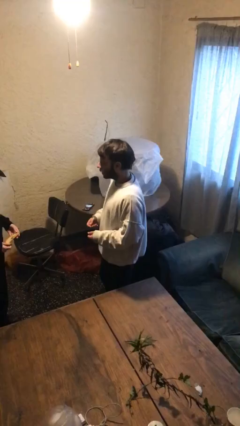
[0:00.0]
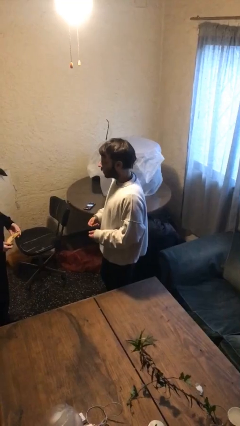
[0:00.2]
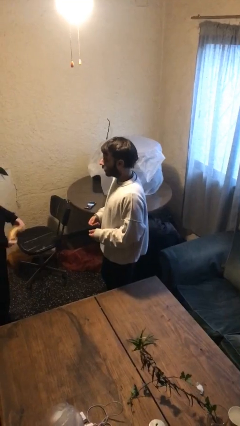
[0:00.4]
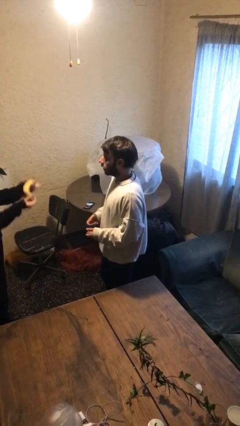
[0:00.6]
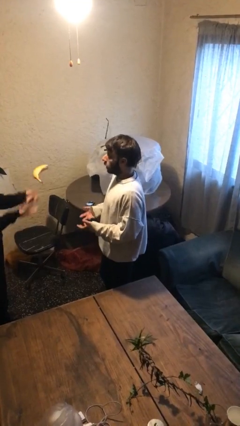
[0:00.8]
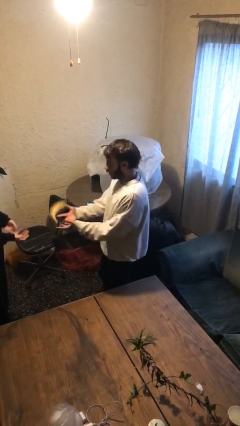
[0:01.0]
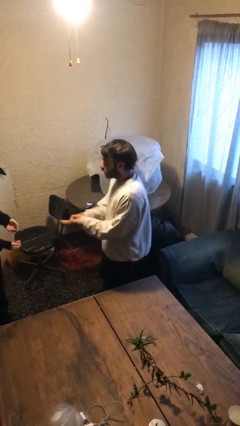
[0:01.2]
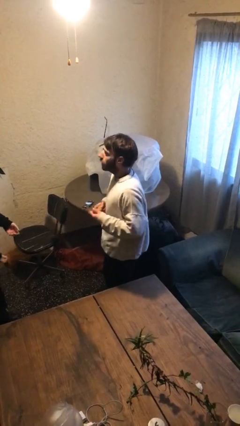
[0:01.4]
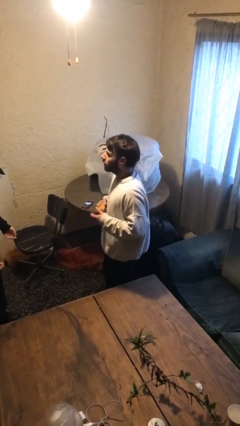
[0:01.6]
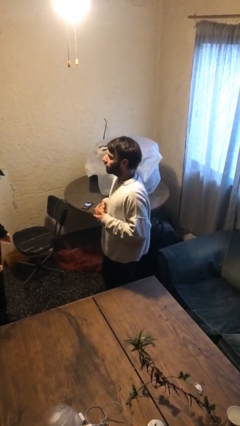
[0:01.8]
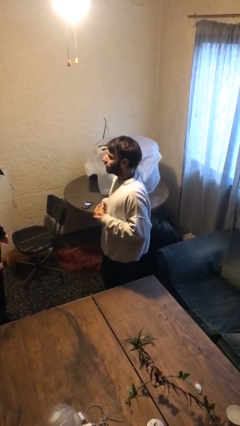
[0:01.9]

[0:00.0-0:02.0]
person catches object from person

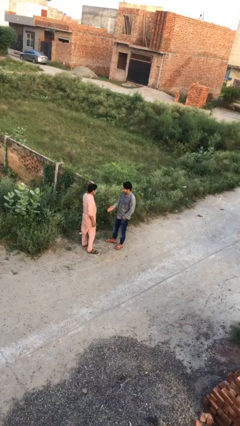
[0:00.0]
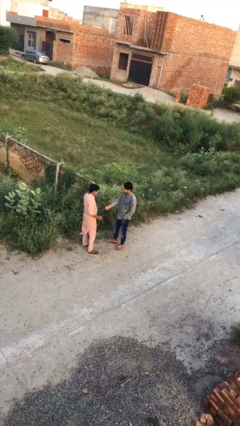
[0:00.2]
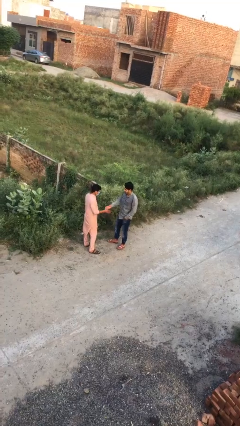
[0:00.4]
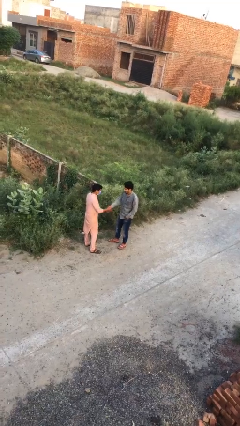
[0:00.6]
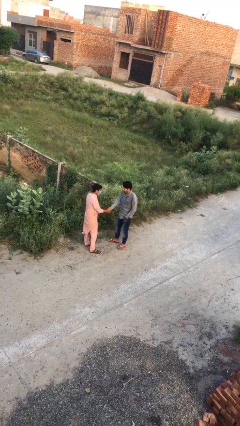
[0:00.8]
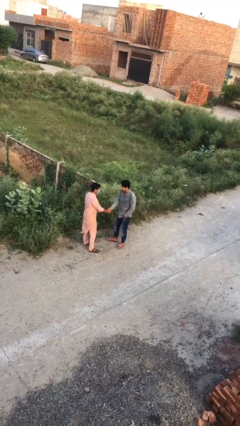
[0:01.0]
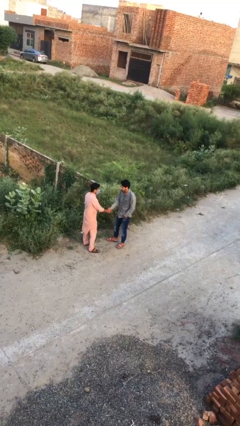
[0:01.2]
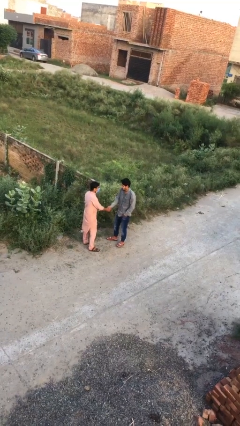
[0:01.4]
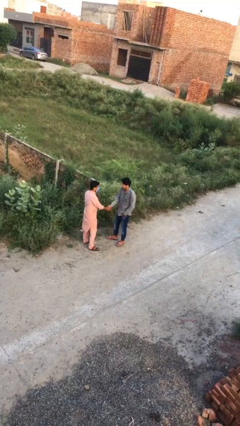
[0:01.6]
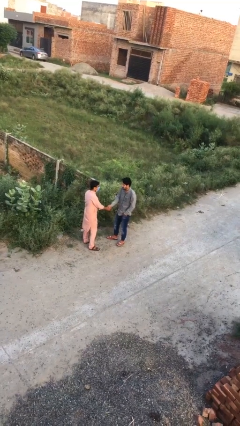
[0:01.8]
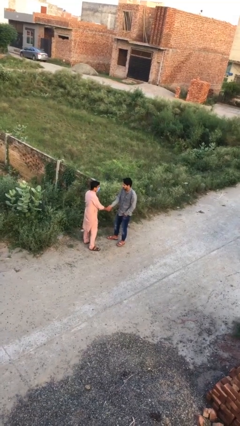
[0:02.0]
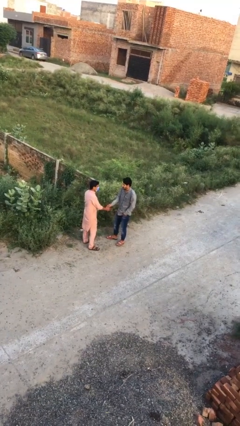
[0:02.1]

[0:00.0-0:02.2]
person shakes hand

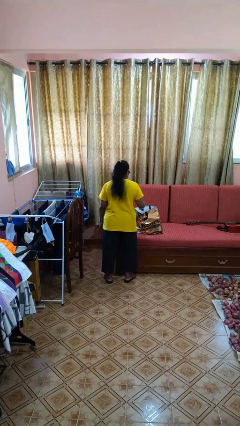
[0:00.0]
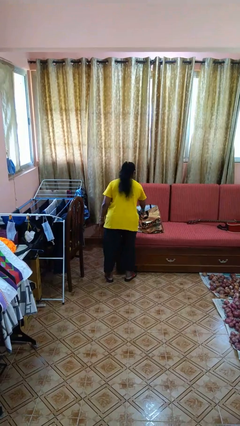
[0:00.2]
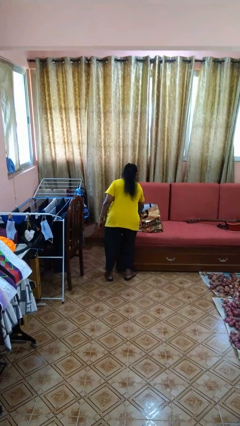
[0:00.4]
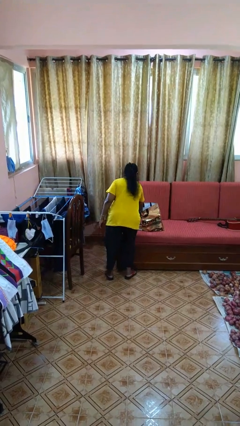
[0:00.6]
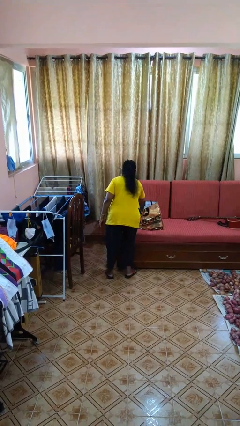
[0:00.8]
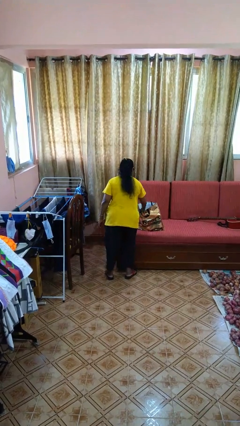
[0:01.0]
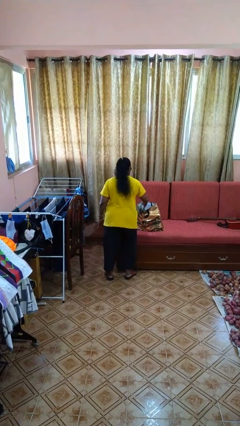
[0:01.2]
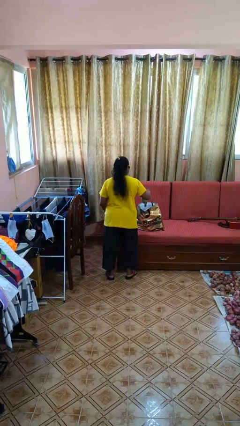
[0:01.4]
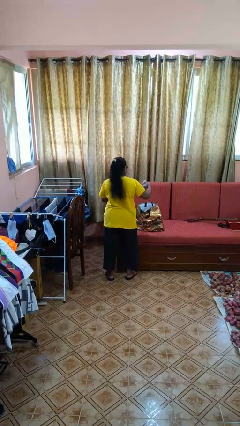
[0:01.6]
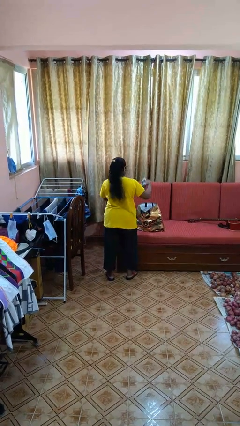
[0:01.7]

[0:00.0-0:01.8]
person takes object from bag

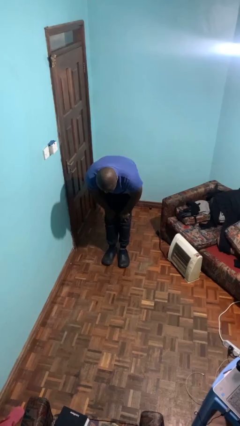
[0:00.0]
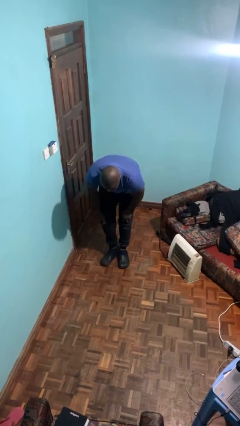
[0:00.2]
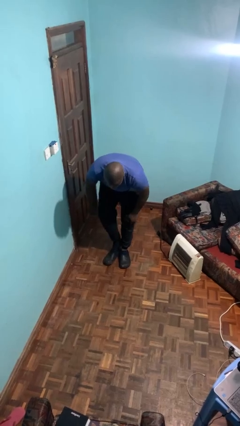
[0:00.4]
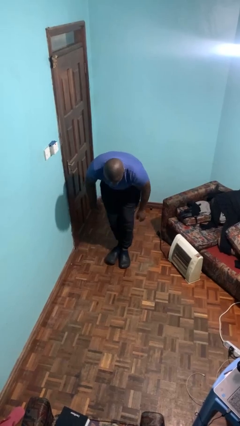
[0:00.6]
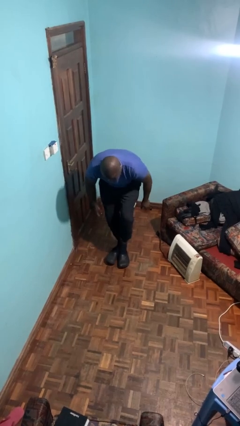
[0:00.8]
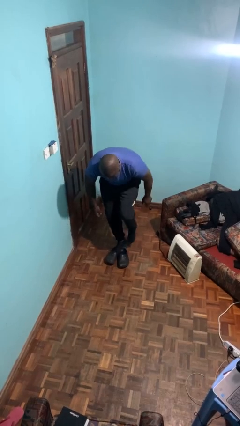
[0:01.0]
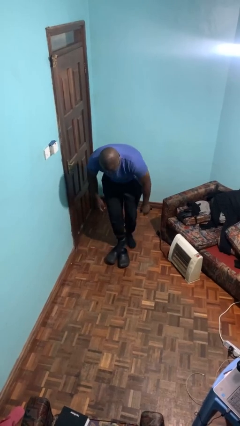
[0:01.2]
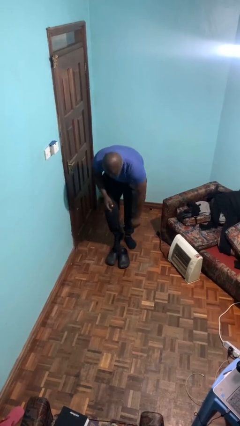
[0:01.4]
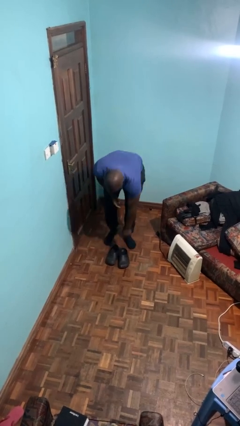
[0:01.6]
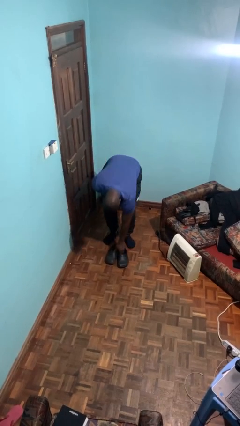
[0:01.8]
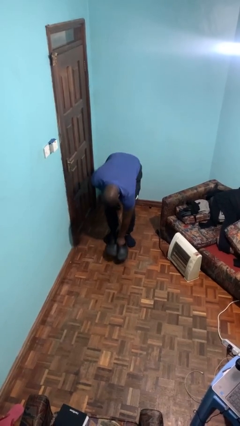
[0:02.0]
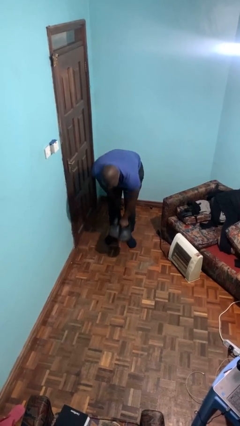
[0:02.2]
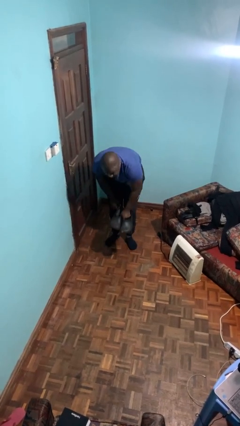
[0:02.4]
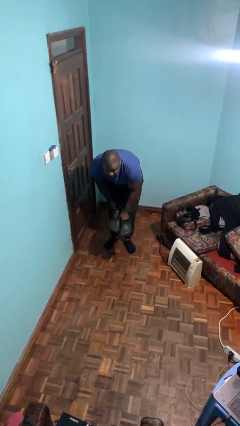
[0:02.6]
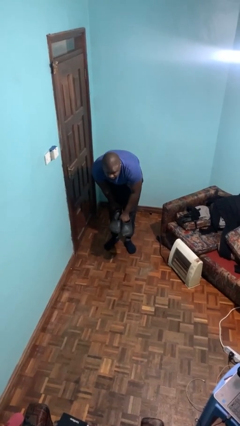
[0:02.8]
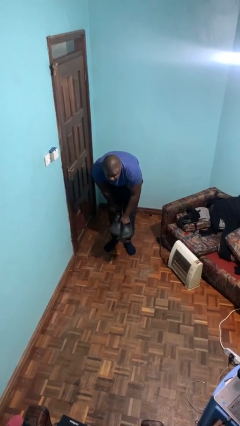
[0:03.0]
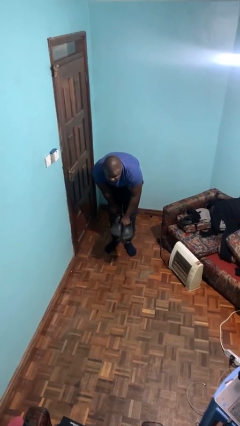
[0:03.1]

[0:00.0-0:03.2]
person takes off shoes

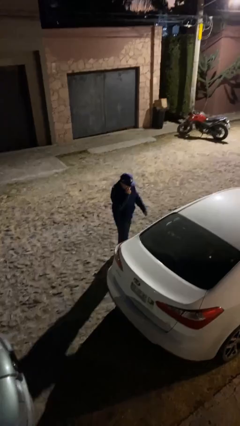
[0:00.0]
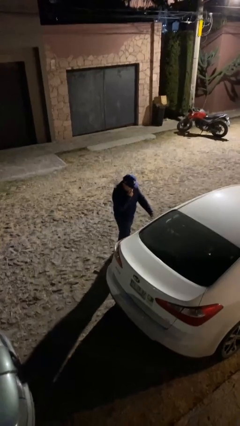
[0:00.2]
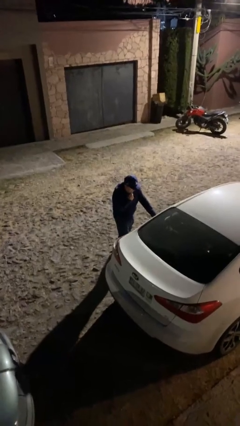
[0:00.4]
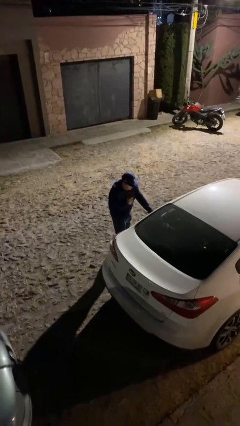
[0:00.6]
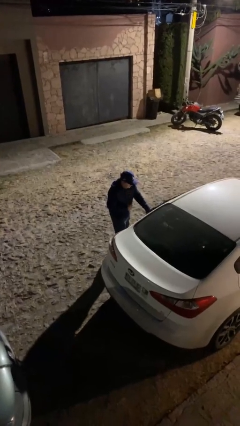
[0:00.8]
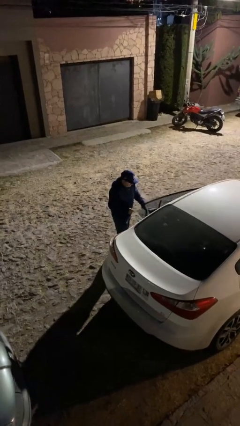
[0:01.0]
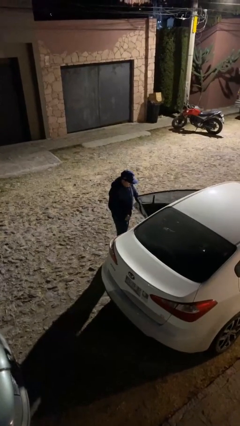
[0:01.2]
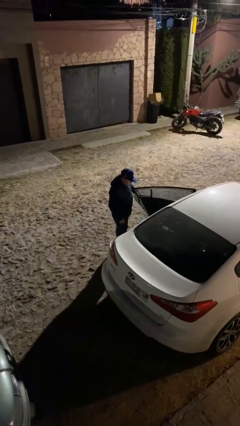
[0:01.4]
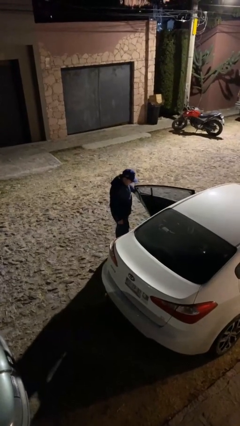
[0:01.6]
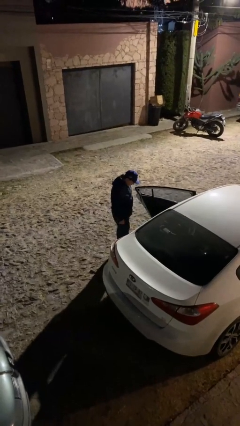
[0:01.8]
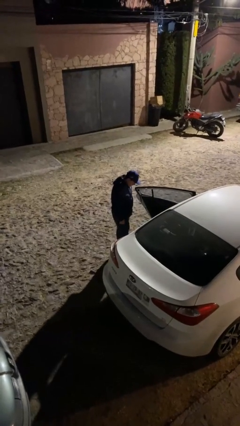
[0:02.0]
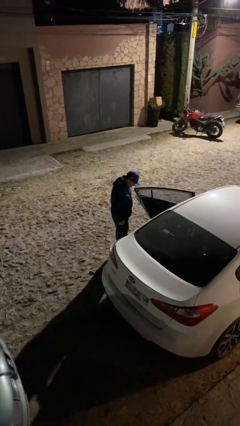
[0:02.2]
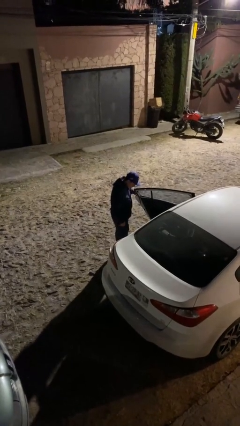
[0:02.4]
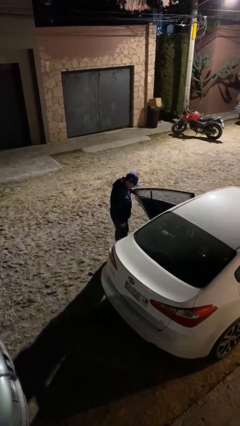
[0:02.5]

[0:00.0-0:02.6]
person opens car door

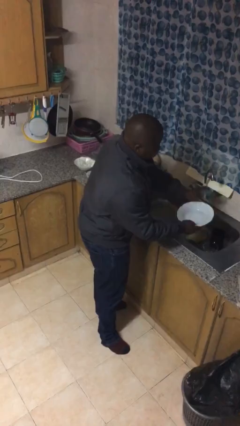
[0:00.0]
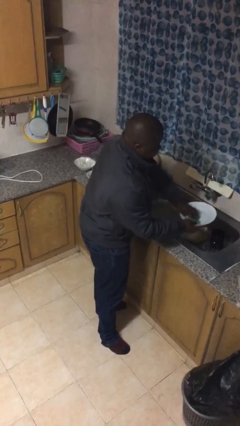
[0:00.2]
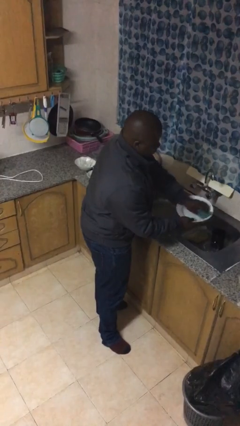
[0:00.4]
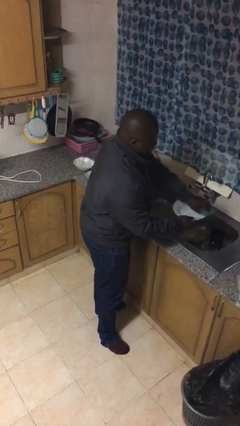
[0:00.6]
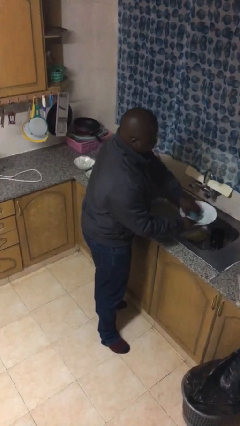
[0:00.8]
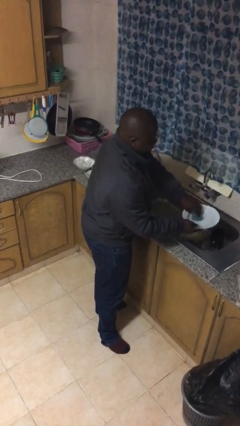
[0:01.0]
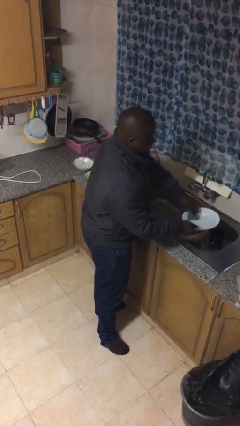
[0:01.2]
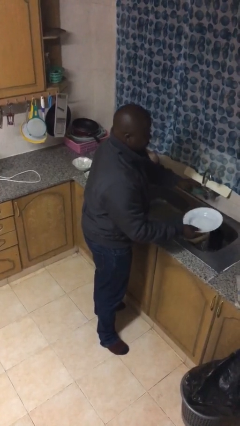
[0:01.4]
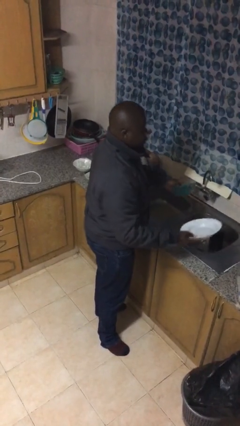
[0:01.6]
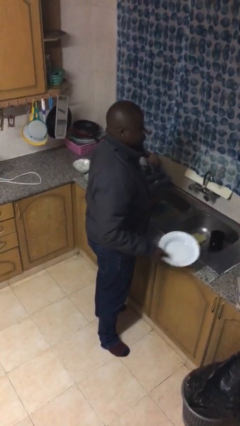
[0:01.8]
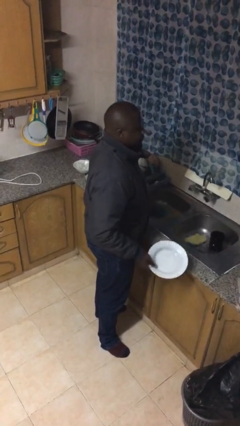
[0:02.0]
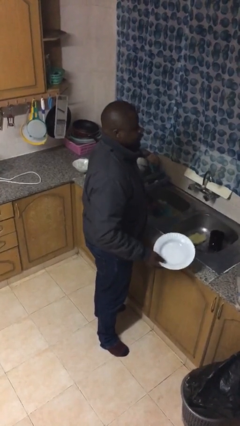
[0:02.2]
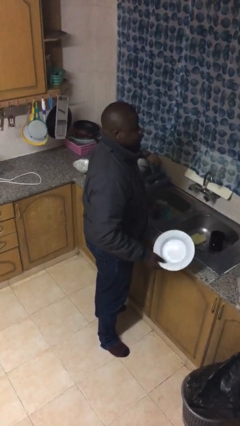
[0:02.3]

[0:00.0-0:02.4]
person washes dish

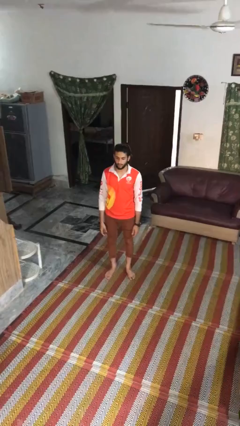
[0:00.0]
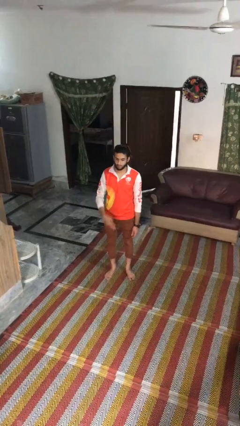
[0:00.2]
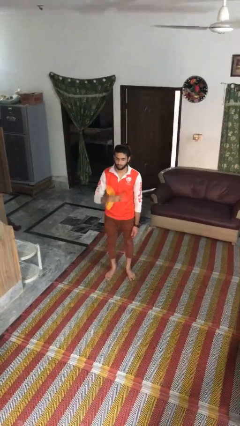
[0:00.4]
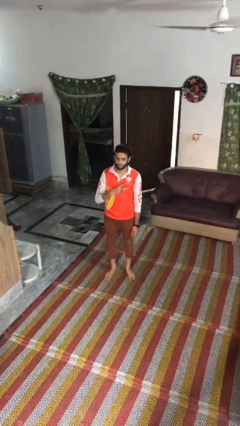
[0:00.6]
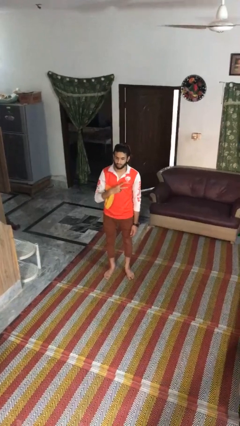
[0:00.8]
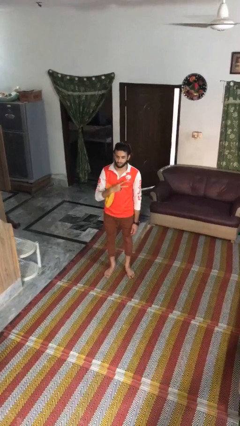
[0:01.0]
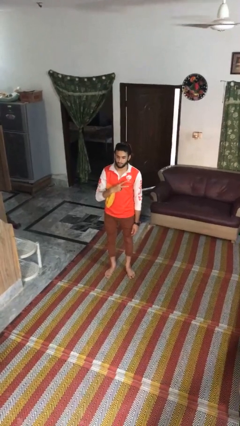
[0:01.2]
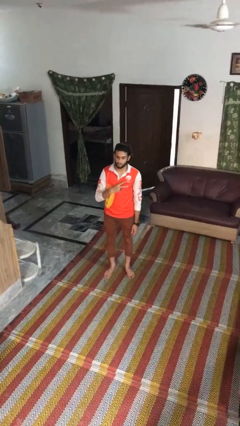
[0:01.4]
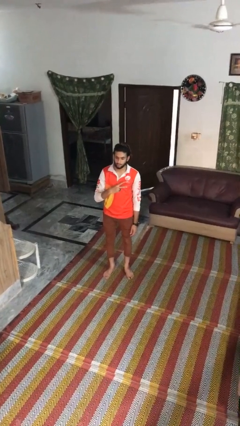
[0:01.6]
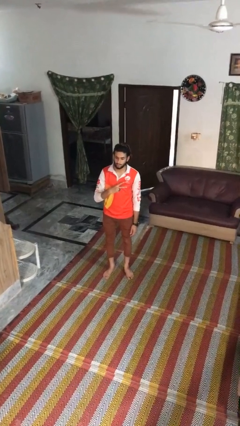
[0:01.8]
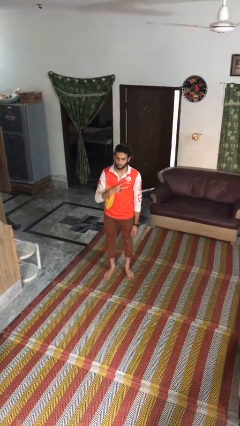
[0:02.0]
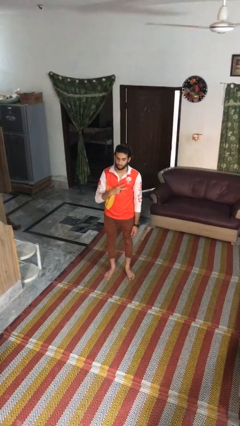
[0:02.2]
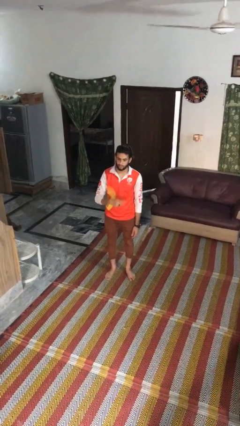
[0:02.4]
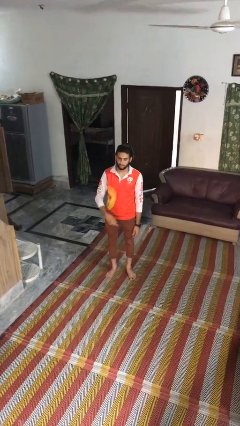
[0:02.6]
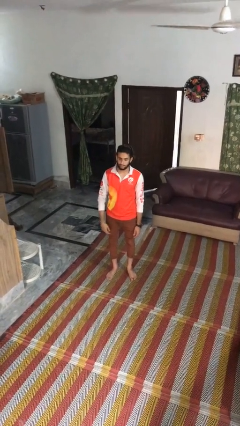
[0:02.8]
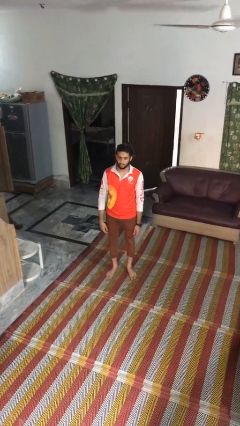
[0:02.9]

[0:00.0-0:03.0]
person gestures peace
